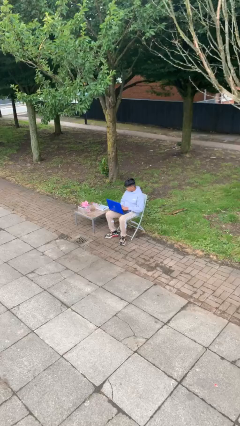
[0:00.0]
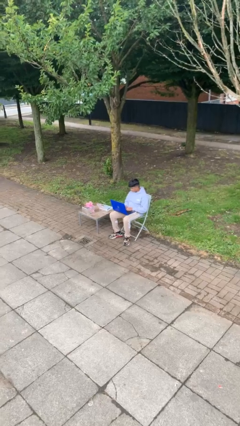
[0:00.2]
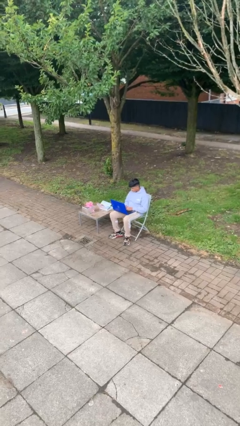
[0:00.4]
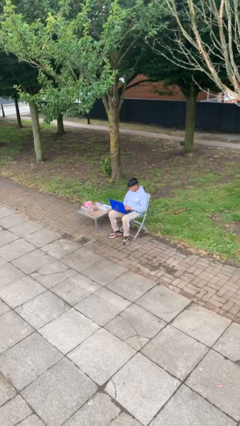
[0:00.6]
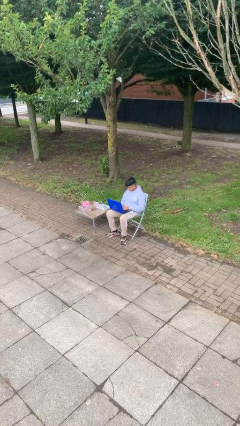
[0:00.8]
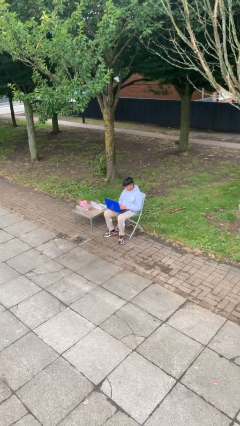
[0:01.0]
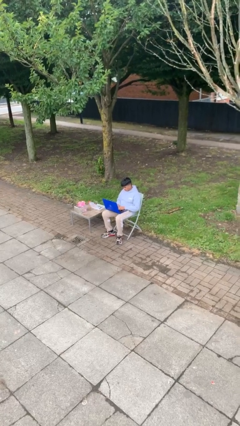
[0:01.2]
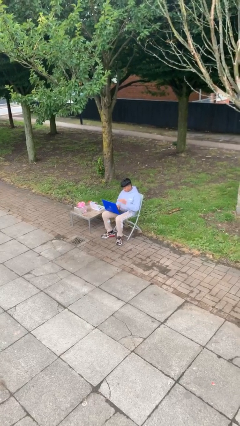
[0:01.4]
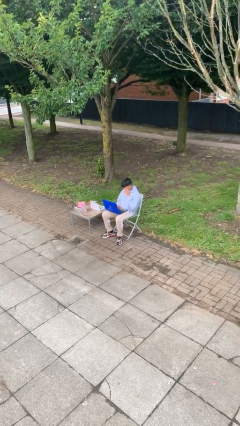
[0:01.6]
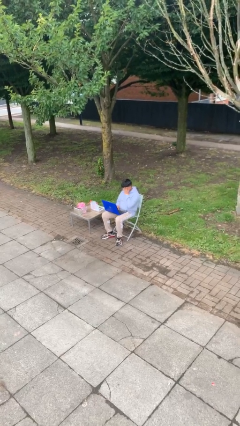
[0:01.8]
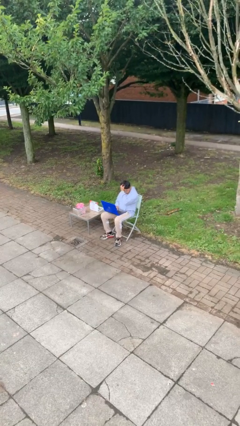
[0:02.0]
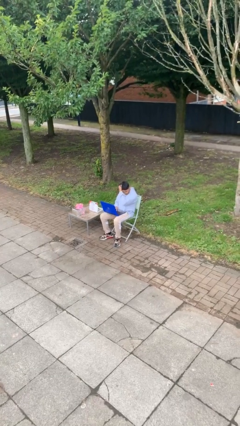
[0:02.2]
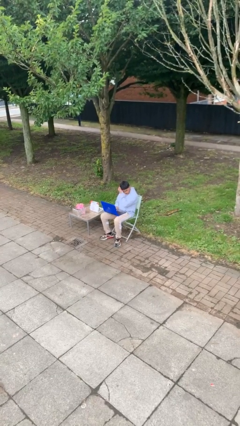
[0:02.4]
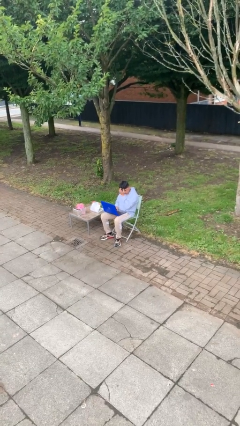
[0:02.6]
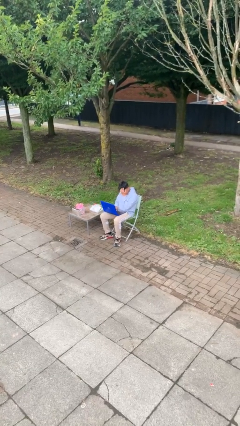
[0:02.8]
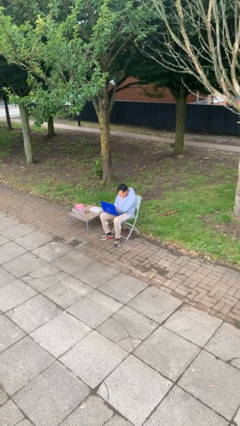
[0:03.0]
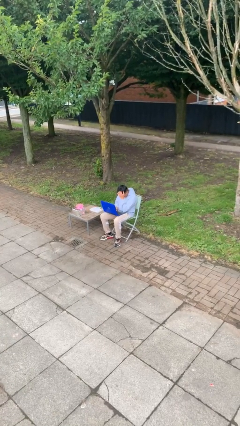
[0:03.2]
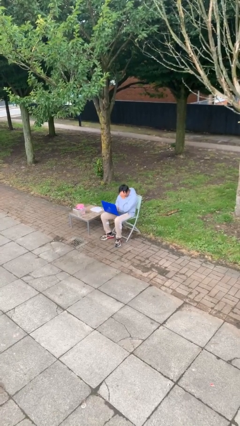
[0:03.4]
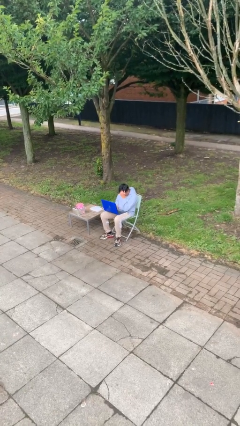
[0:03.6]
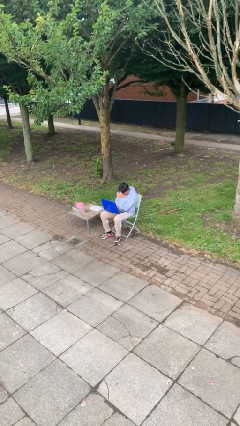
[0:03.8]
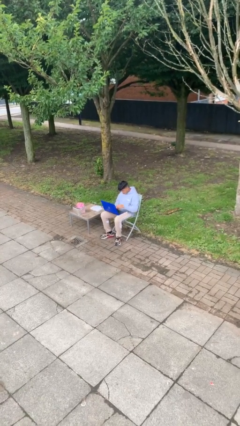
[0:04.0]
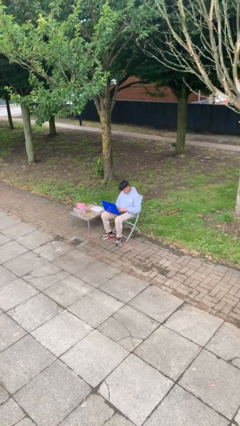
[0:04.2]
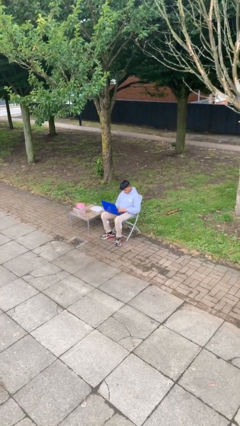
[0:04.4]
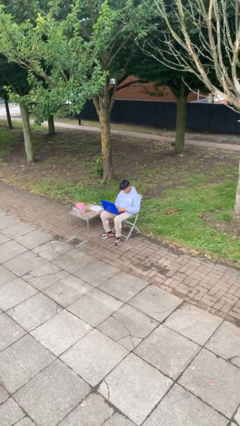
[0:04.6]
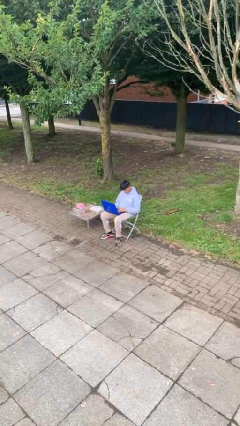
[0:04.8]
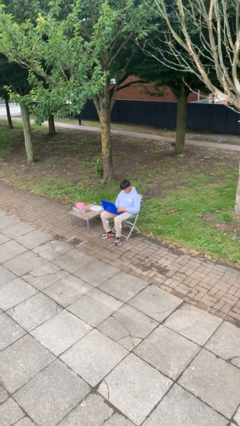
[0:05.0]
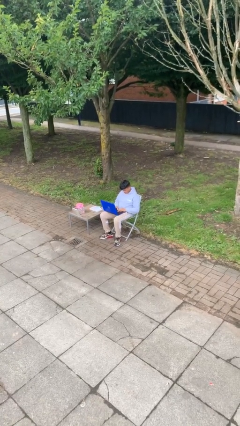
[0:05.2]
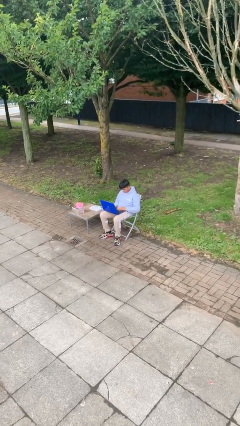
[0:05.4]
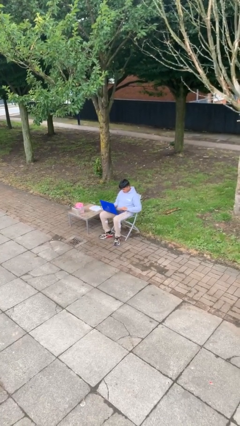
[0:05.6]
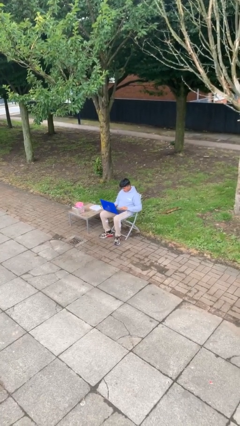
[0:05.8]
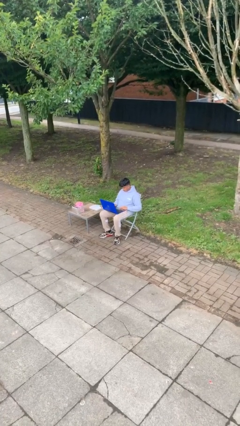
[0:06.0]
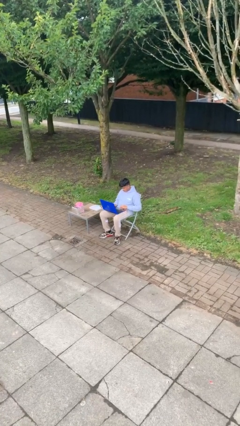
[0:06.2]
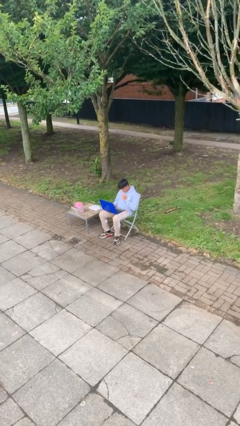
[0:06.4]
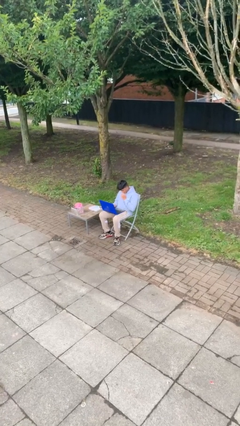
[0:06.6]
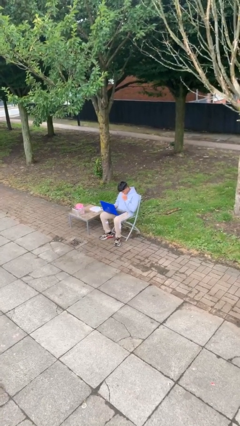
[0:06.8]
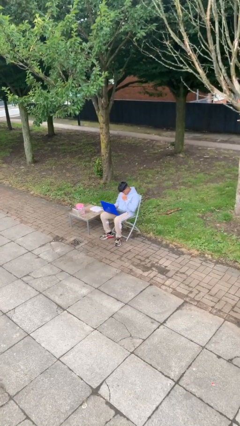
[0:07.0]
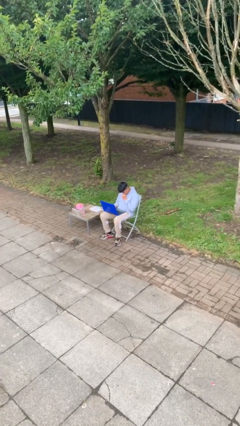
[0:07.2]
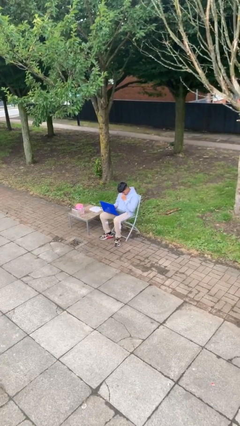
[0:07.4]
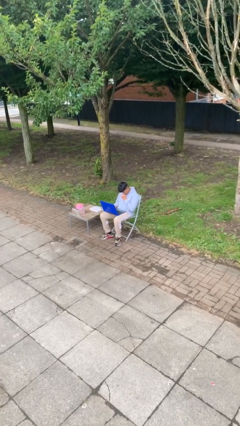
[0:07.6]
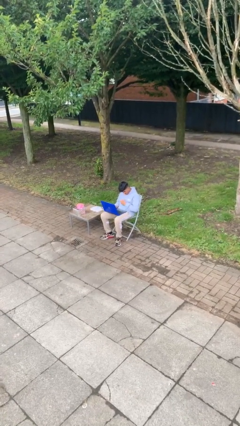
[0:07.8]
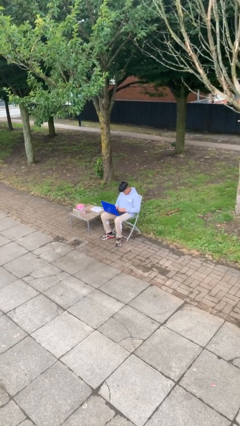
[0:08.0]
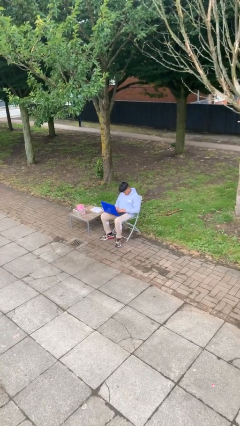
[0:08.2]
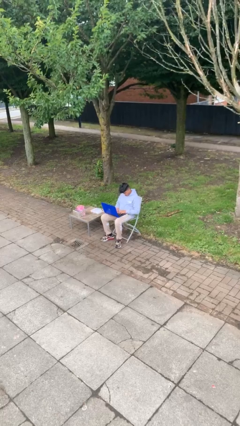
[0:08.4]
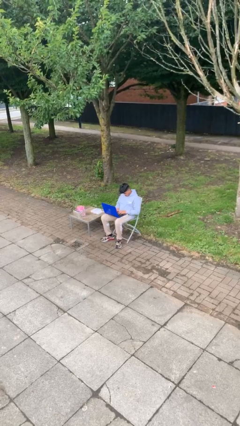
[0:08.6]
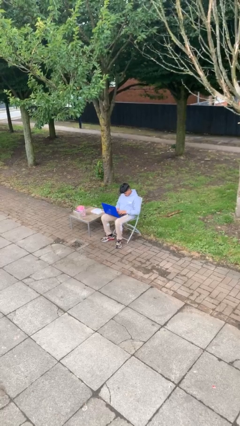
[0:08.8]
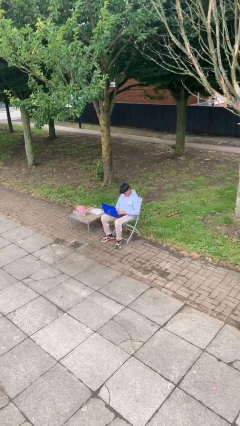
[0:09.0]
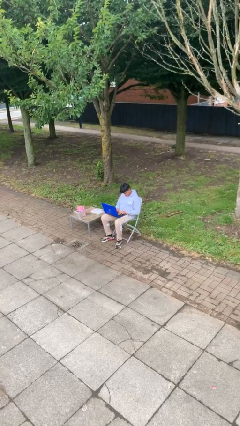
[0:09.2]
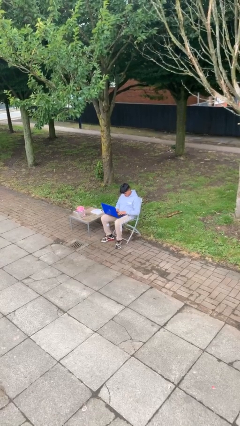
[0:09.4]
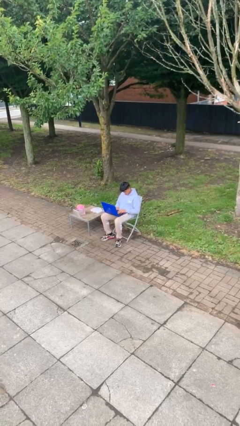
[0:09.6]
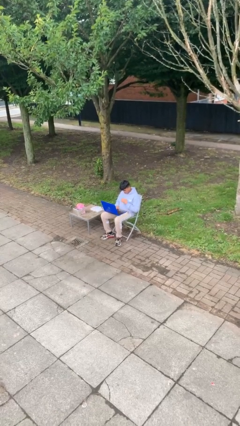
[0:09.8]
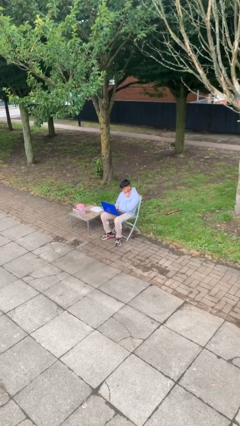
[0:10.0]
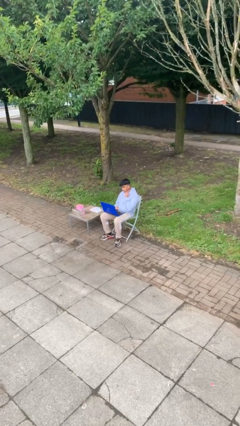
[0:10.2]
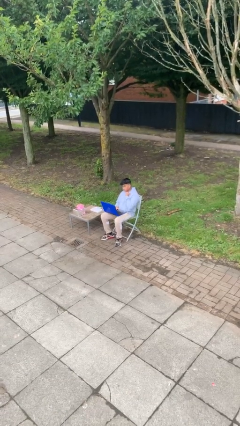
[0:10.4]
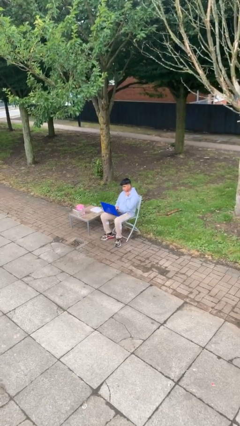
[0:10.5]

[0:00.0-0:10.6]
person interacts with laptop

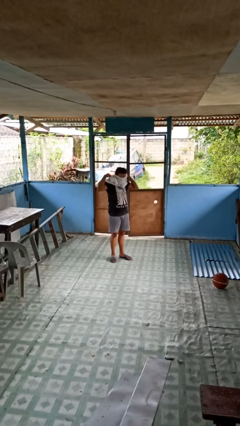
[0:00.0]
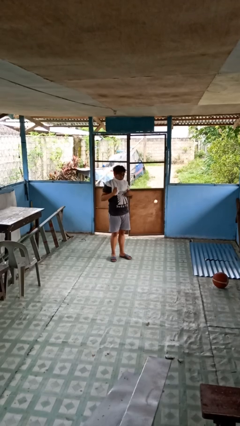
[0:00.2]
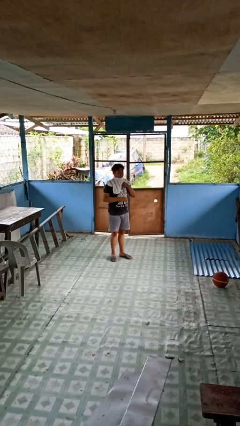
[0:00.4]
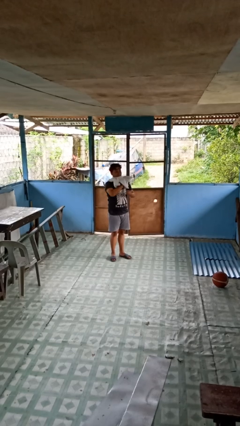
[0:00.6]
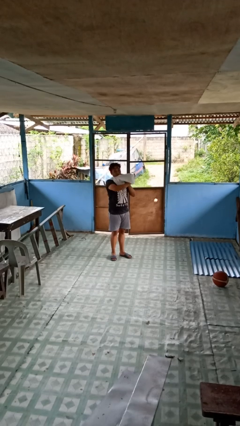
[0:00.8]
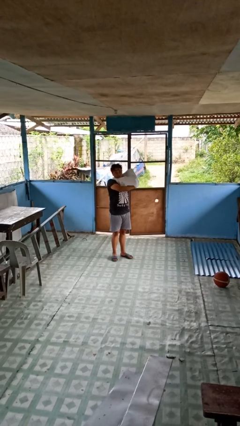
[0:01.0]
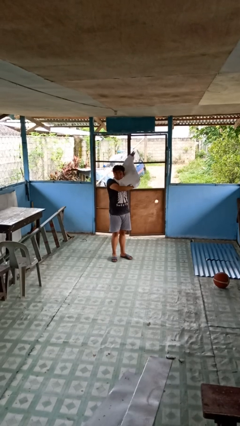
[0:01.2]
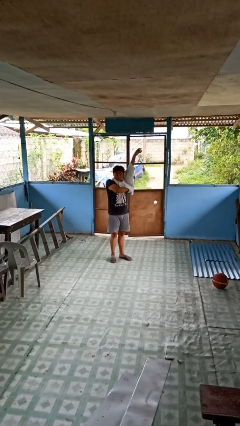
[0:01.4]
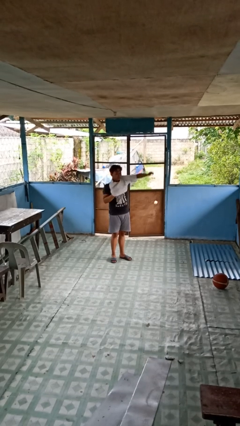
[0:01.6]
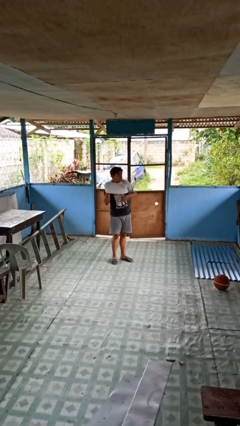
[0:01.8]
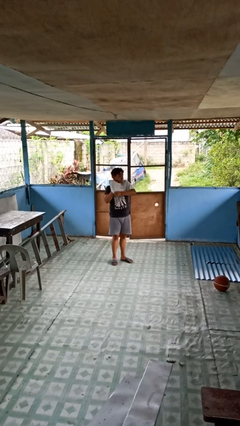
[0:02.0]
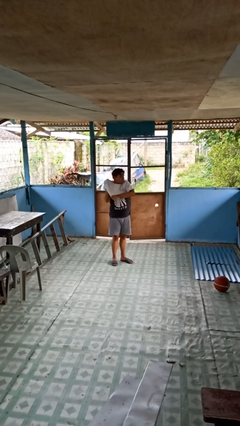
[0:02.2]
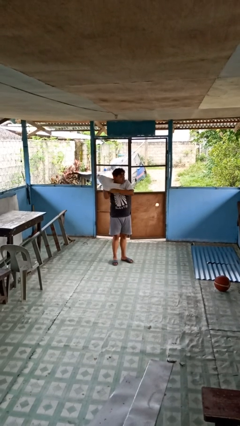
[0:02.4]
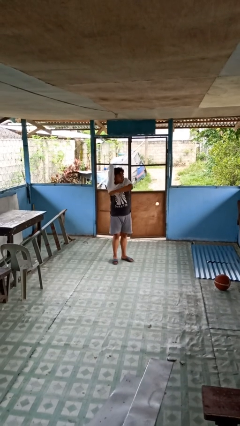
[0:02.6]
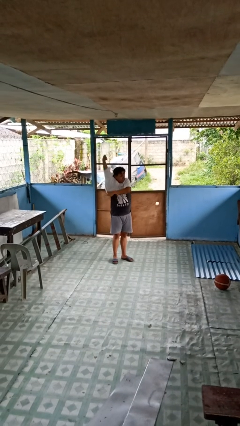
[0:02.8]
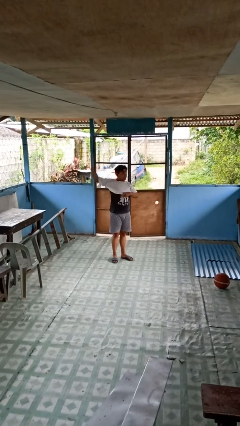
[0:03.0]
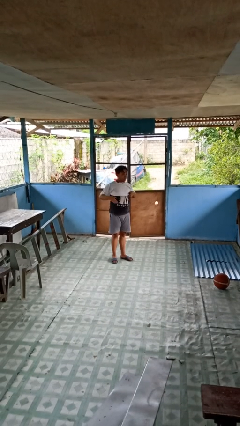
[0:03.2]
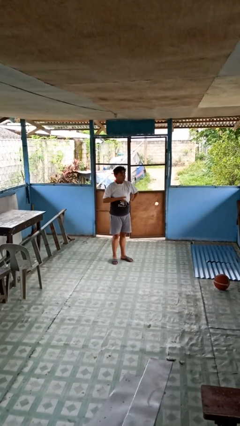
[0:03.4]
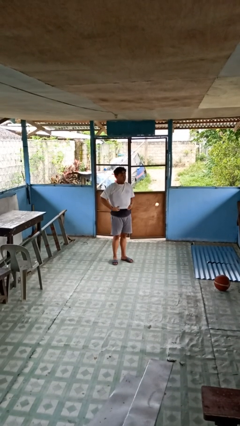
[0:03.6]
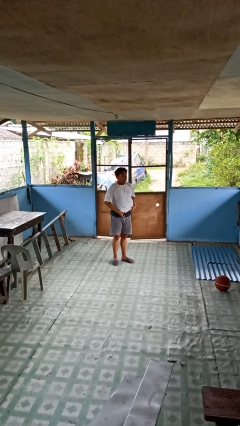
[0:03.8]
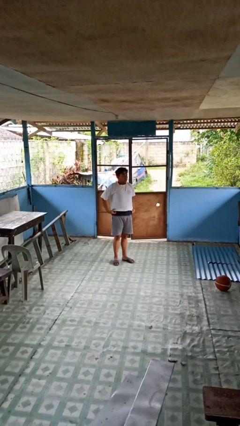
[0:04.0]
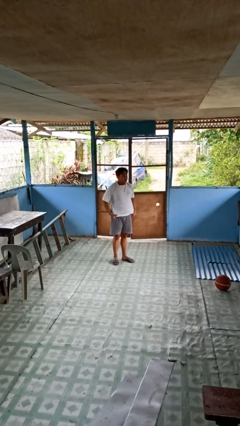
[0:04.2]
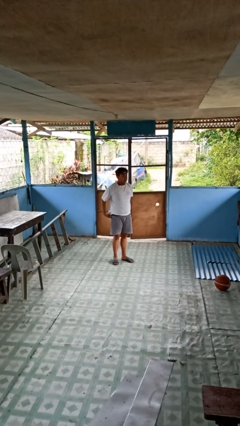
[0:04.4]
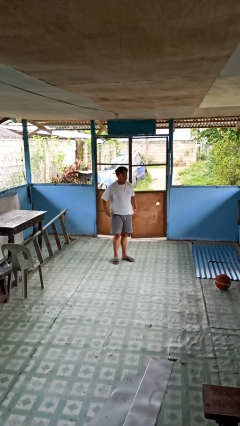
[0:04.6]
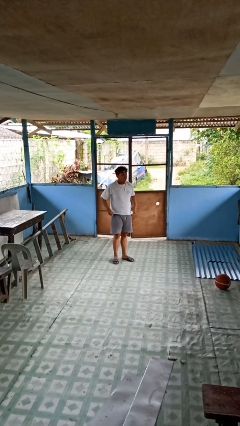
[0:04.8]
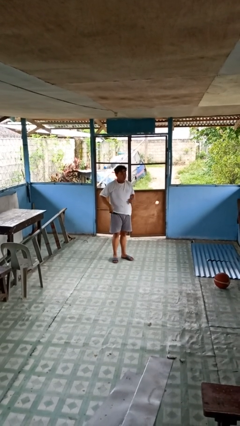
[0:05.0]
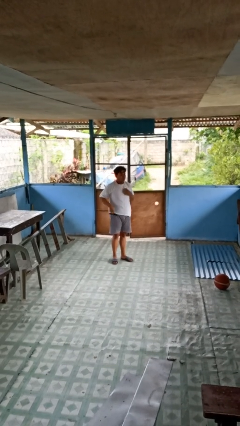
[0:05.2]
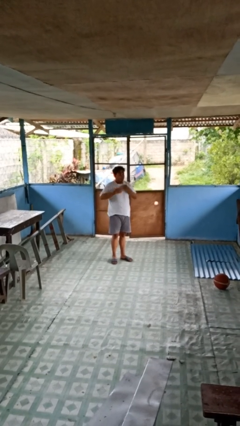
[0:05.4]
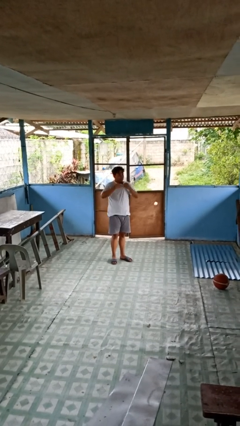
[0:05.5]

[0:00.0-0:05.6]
person puts on shirt

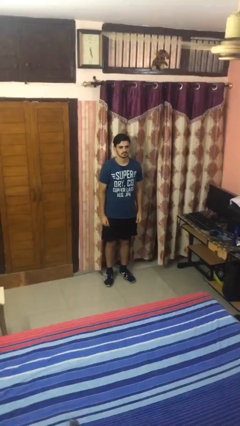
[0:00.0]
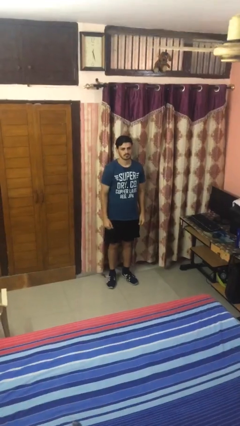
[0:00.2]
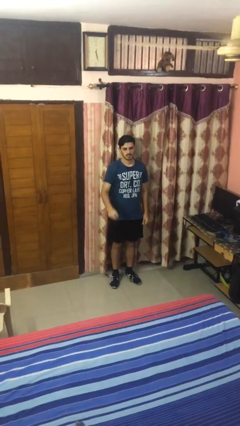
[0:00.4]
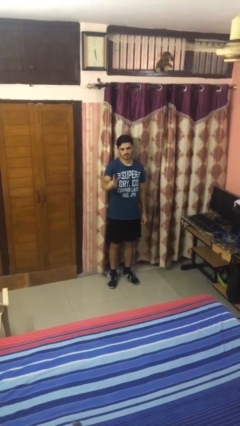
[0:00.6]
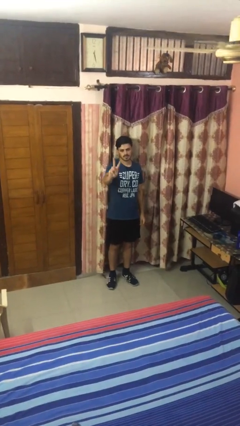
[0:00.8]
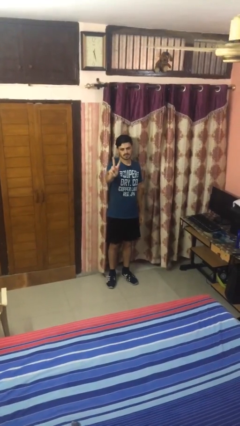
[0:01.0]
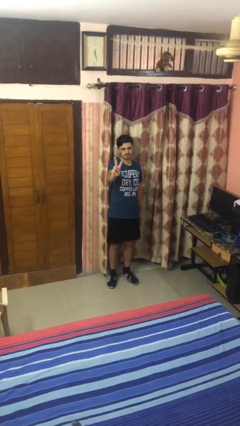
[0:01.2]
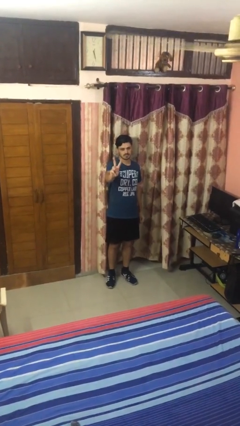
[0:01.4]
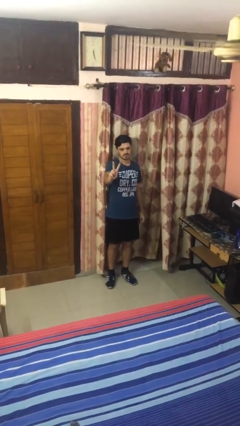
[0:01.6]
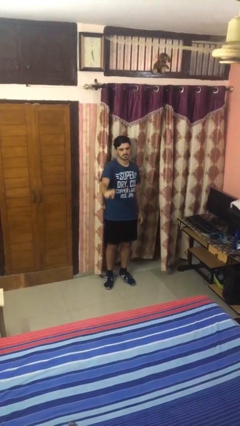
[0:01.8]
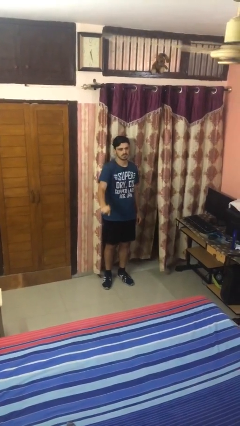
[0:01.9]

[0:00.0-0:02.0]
person gestures peace
